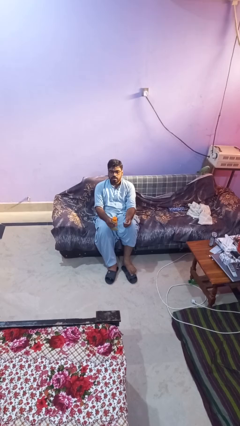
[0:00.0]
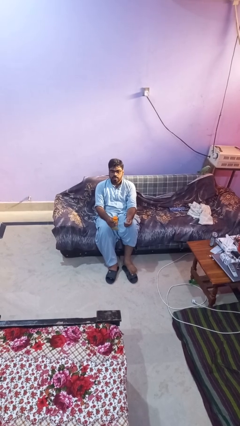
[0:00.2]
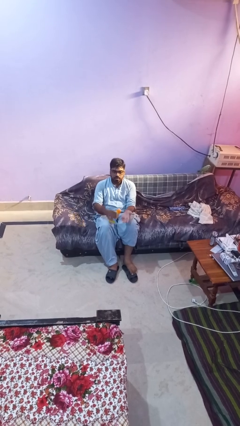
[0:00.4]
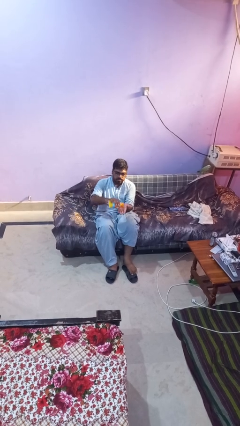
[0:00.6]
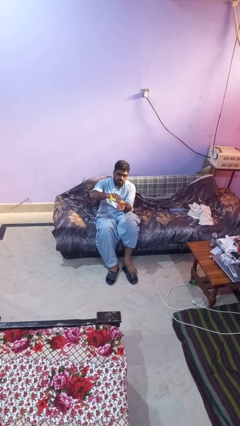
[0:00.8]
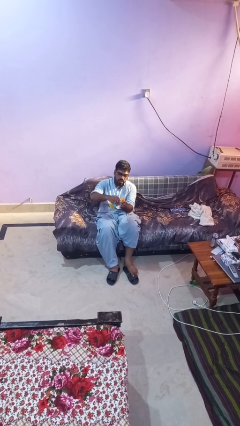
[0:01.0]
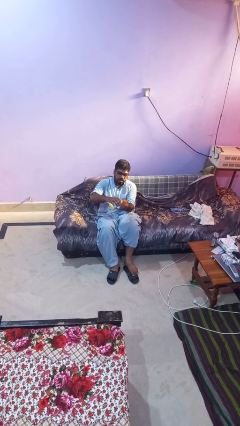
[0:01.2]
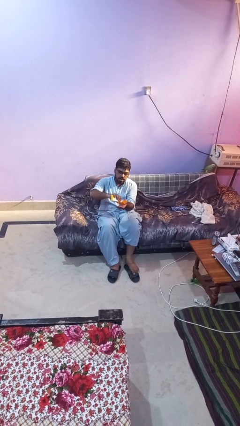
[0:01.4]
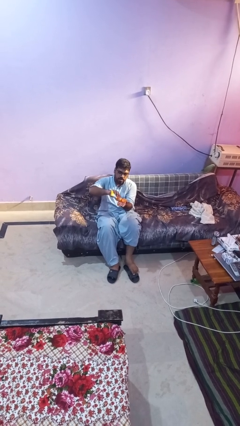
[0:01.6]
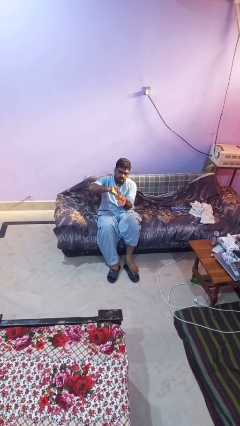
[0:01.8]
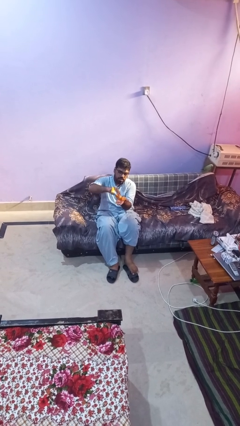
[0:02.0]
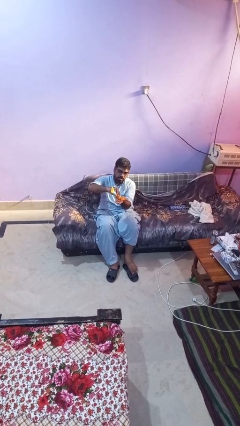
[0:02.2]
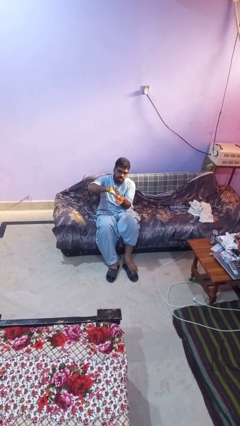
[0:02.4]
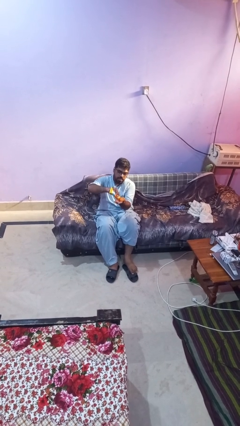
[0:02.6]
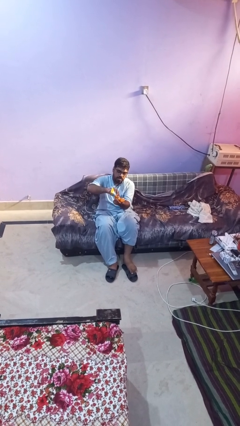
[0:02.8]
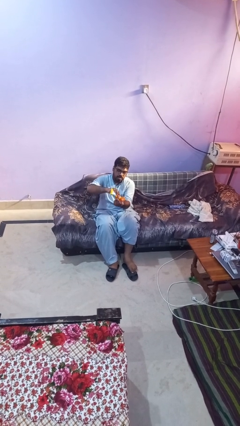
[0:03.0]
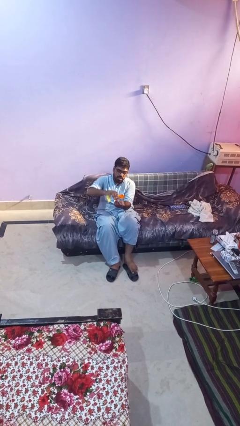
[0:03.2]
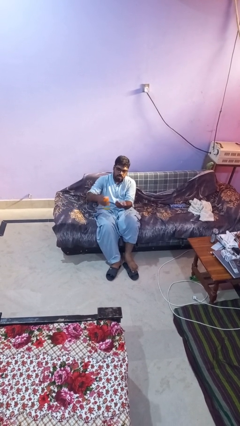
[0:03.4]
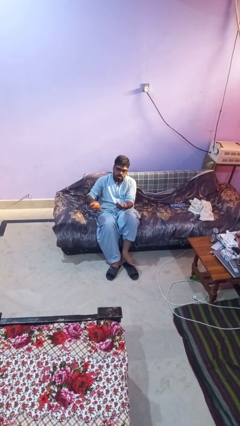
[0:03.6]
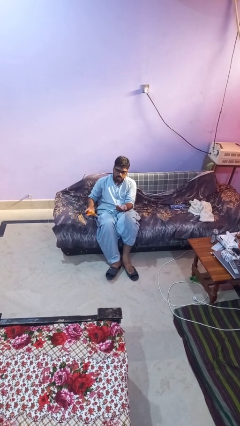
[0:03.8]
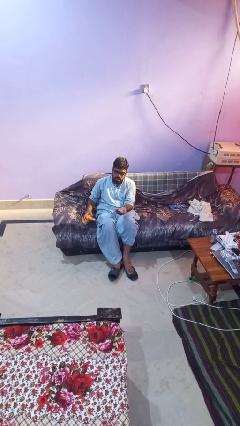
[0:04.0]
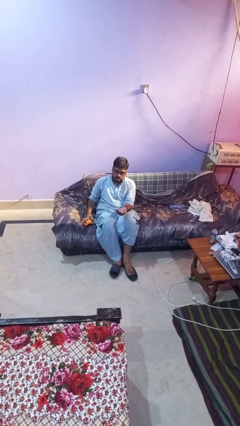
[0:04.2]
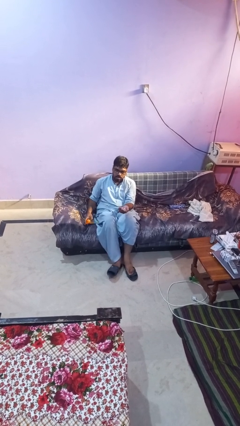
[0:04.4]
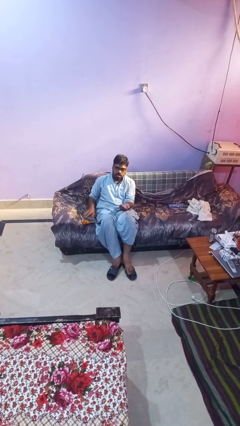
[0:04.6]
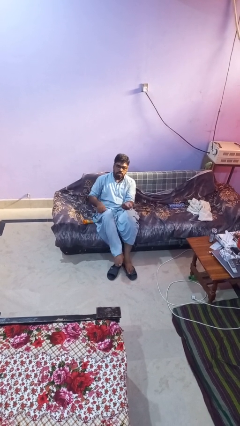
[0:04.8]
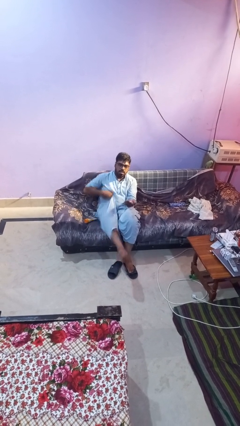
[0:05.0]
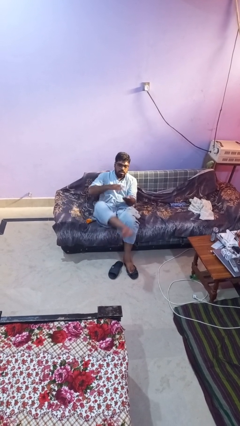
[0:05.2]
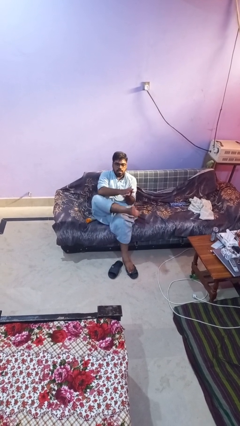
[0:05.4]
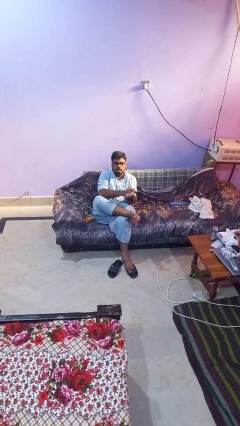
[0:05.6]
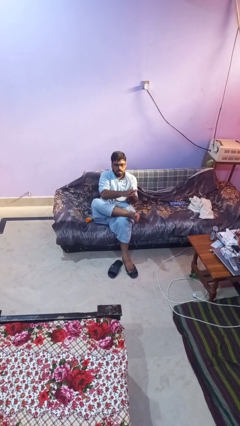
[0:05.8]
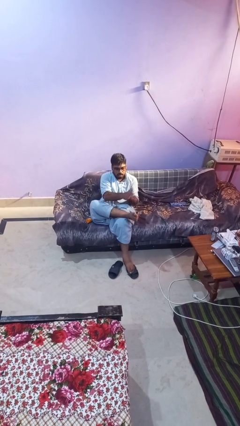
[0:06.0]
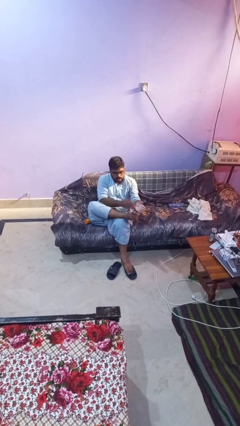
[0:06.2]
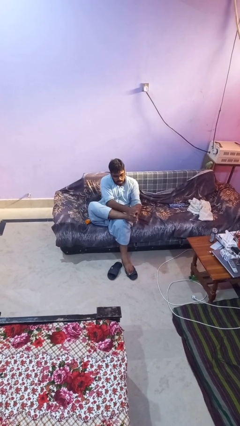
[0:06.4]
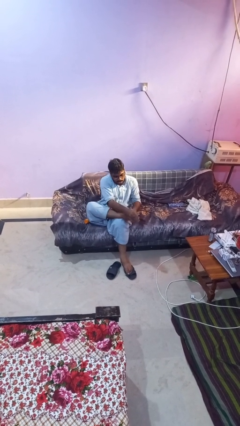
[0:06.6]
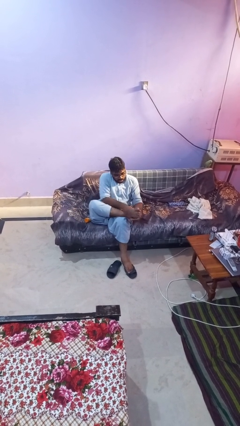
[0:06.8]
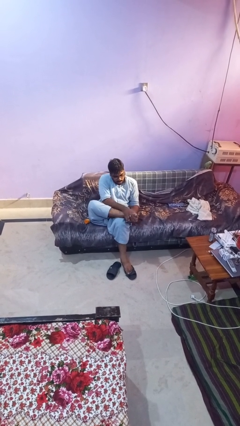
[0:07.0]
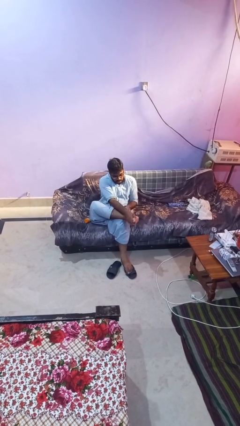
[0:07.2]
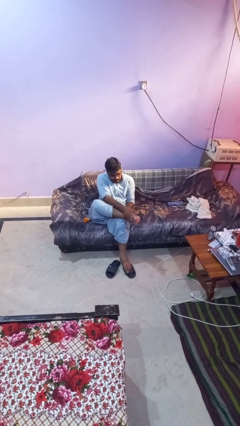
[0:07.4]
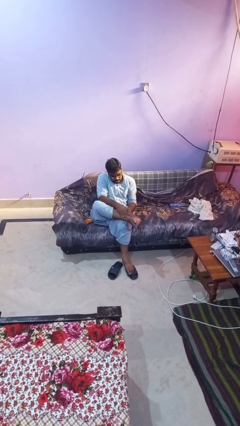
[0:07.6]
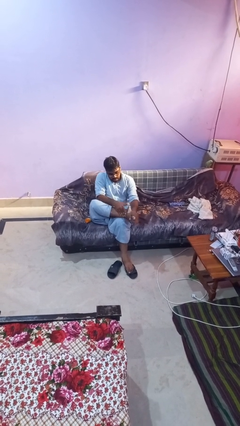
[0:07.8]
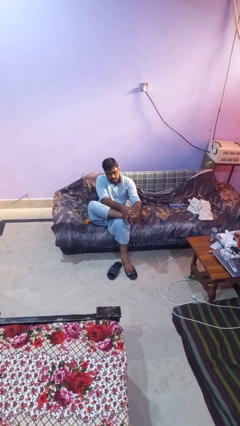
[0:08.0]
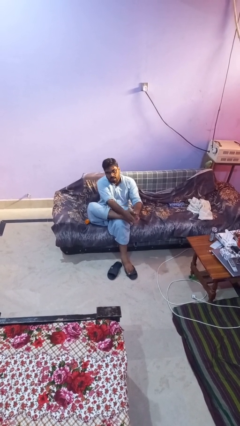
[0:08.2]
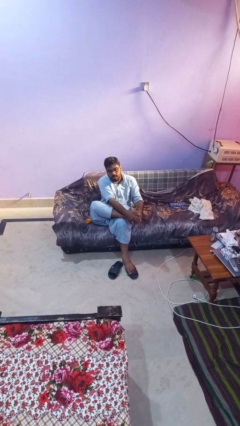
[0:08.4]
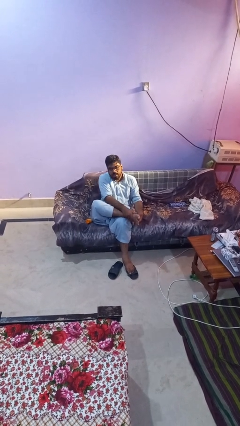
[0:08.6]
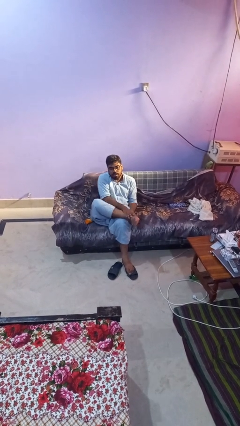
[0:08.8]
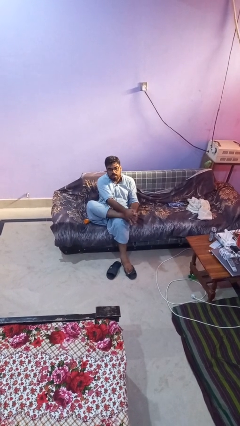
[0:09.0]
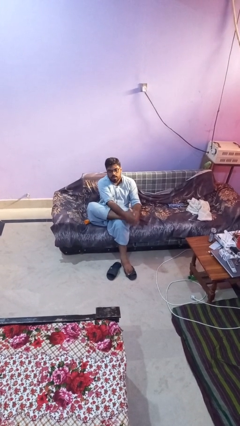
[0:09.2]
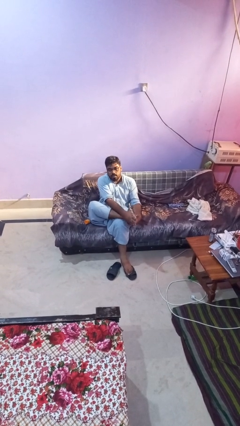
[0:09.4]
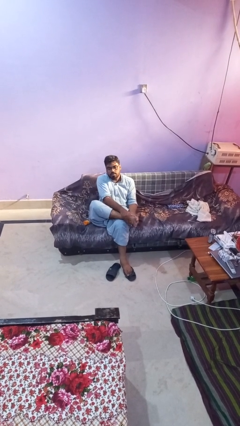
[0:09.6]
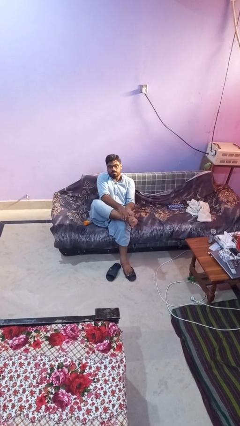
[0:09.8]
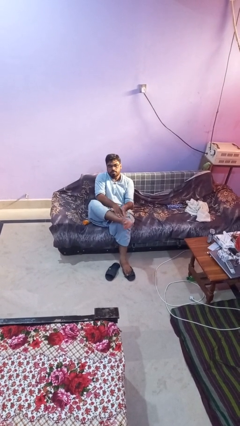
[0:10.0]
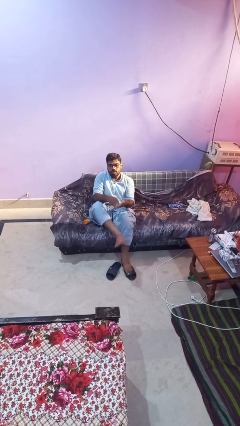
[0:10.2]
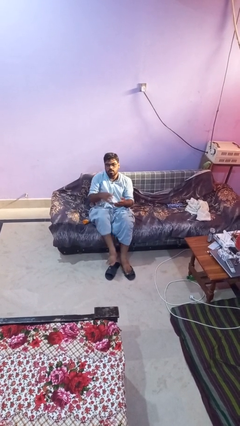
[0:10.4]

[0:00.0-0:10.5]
person applies sunscreen

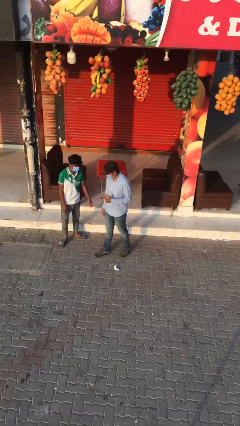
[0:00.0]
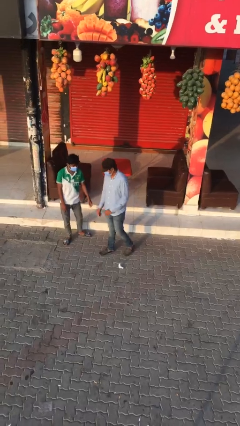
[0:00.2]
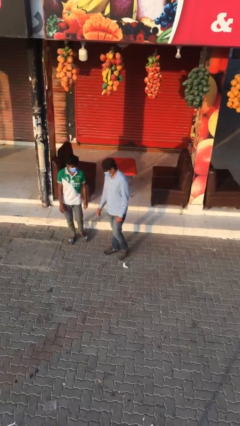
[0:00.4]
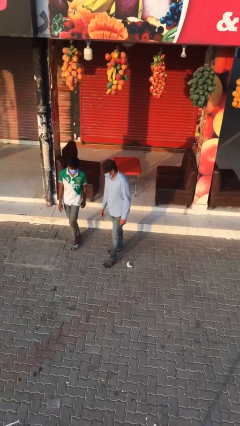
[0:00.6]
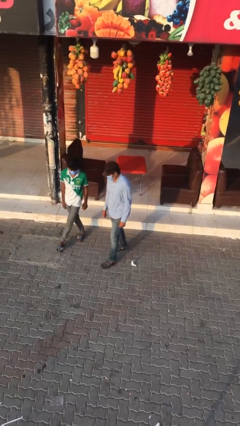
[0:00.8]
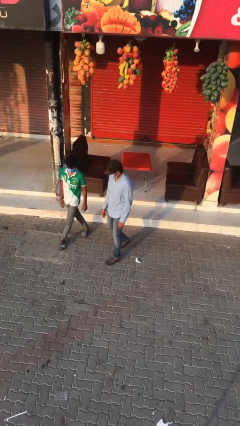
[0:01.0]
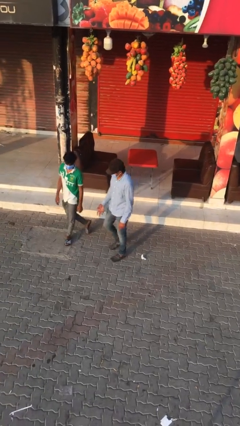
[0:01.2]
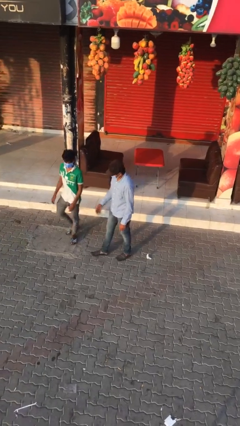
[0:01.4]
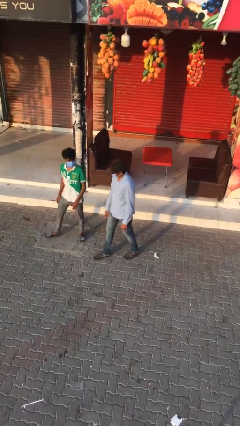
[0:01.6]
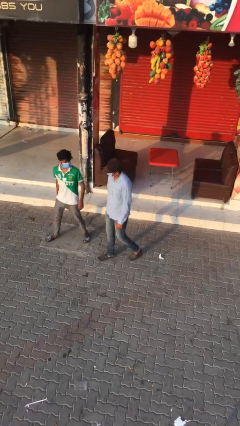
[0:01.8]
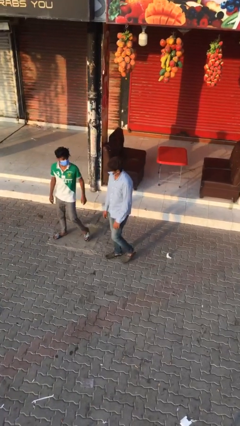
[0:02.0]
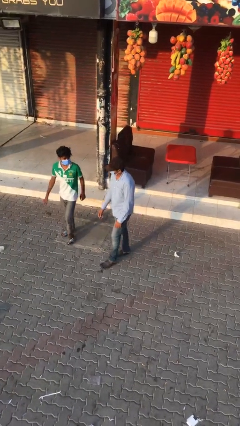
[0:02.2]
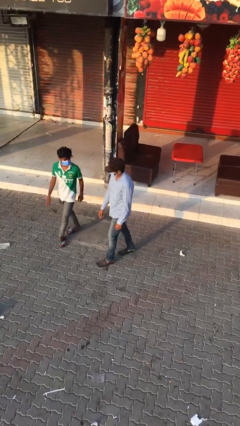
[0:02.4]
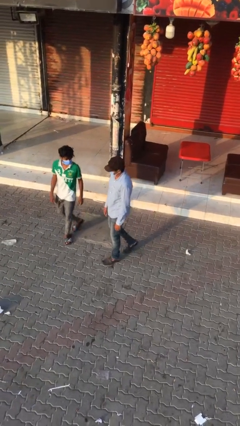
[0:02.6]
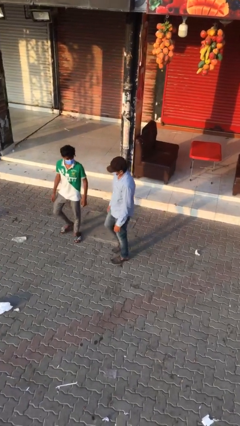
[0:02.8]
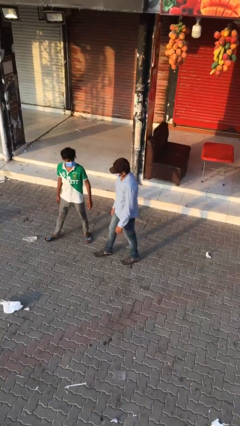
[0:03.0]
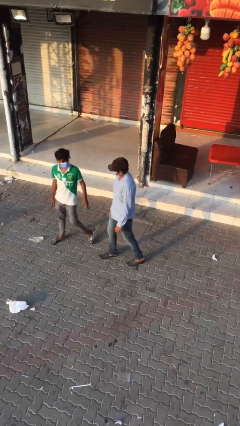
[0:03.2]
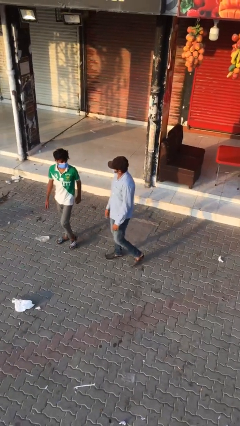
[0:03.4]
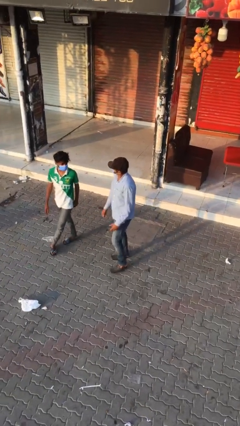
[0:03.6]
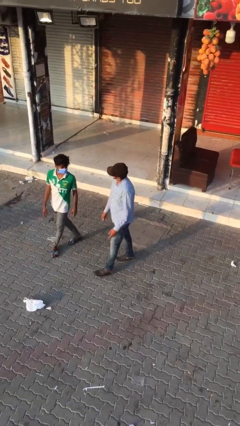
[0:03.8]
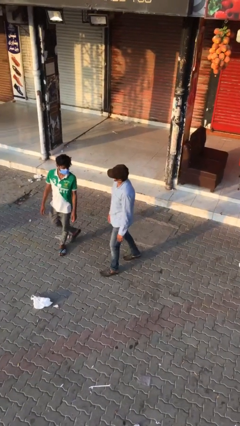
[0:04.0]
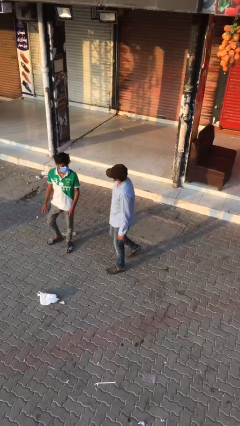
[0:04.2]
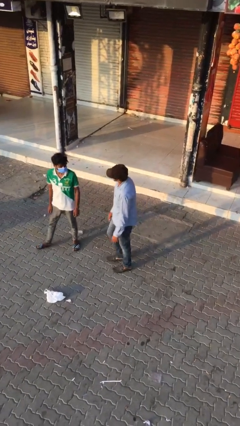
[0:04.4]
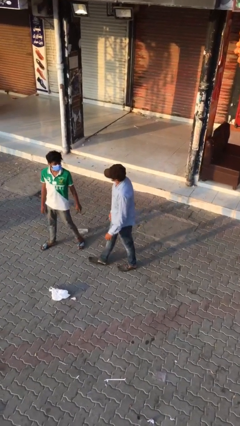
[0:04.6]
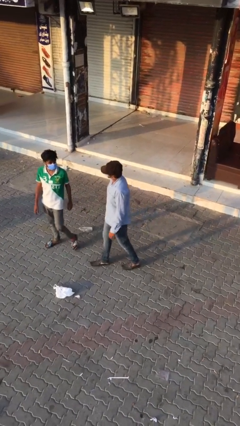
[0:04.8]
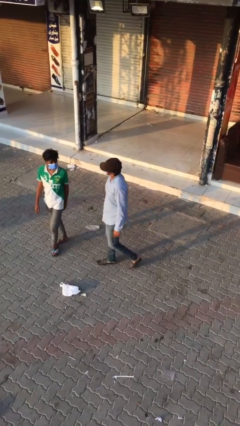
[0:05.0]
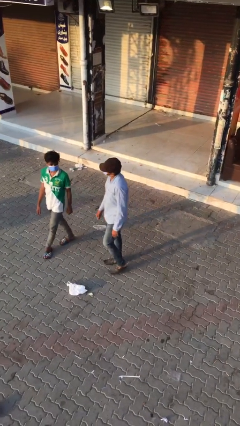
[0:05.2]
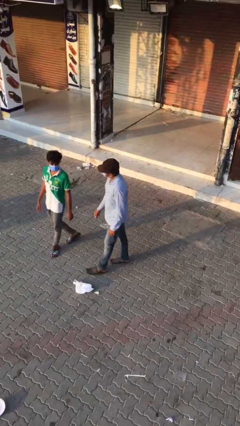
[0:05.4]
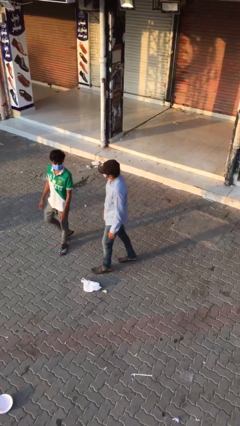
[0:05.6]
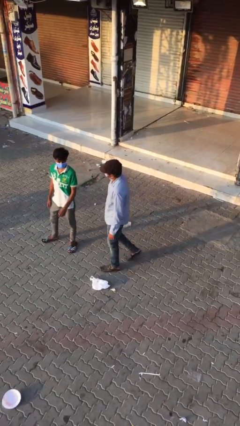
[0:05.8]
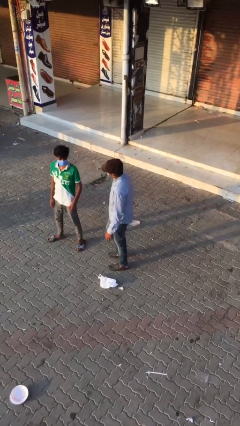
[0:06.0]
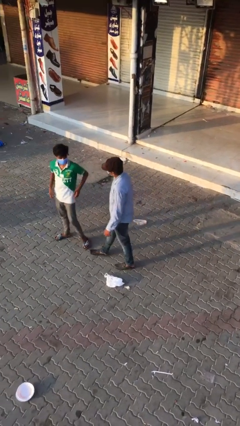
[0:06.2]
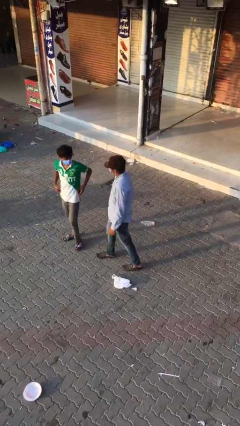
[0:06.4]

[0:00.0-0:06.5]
person talks to person

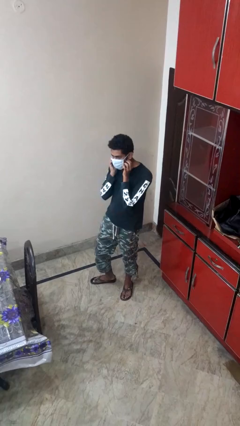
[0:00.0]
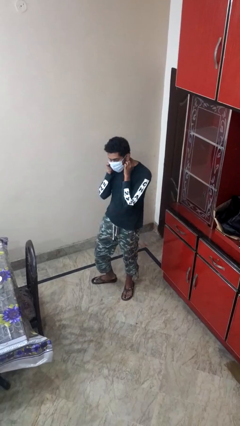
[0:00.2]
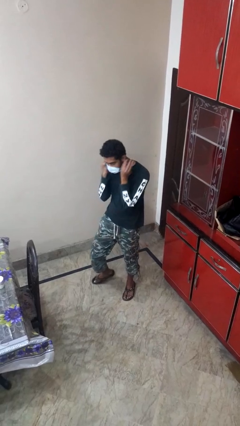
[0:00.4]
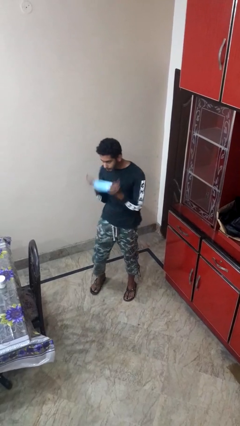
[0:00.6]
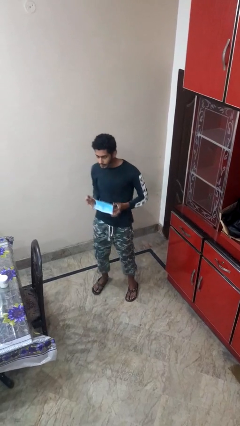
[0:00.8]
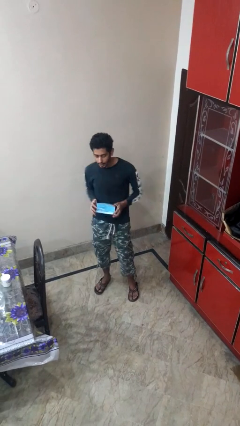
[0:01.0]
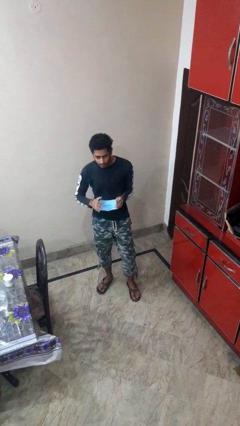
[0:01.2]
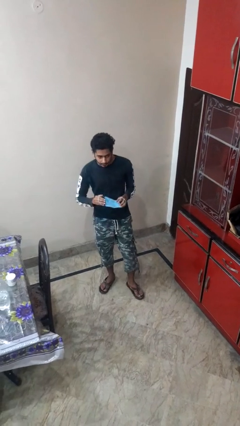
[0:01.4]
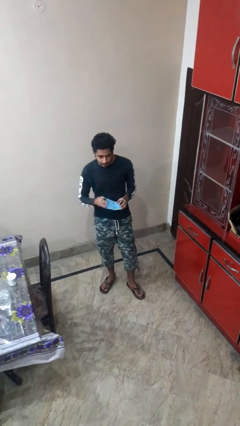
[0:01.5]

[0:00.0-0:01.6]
person takes off facemask
